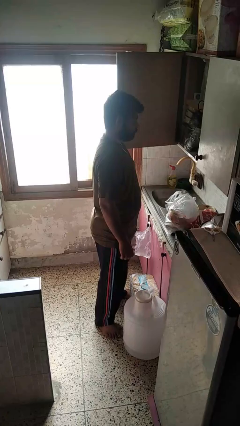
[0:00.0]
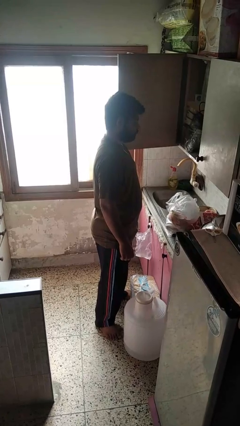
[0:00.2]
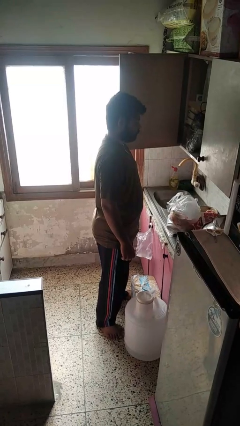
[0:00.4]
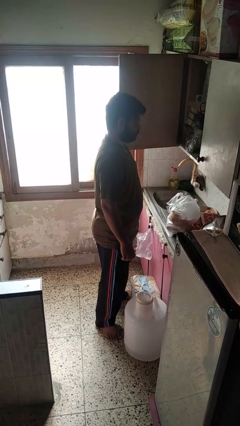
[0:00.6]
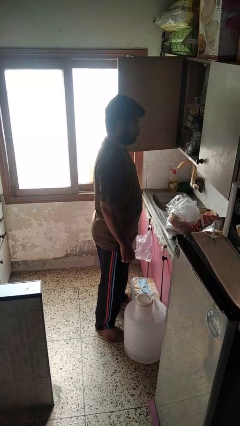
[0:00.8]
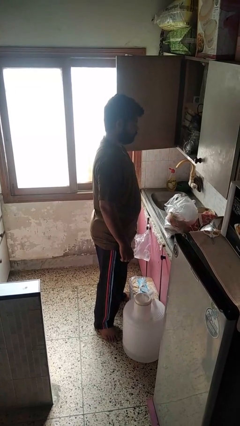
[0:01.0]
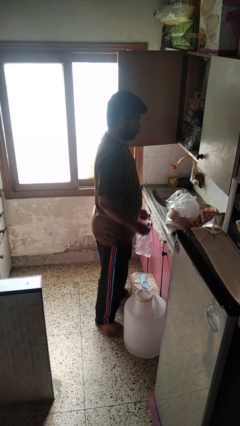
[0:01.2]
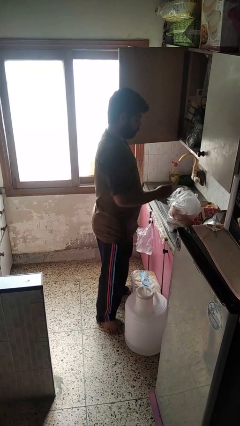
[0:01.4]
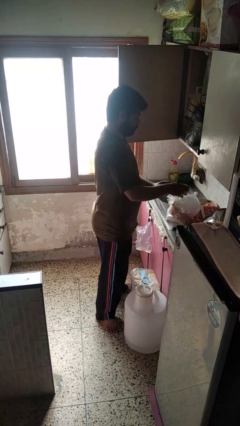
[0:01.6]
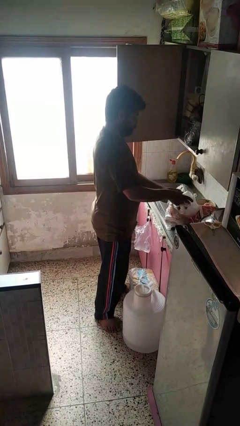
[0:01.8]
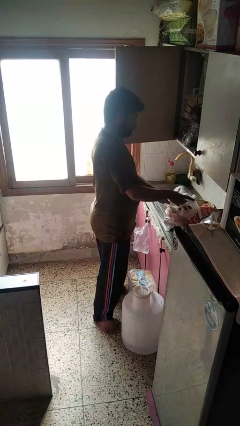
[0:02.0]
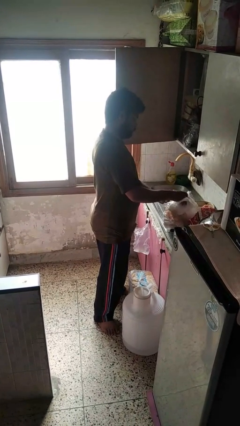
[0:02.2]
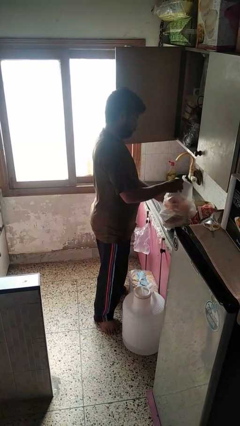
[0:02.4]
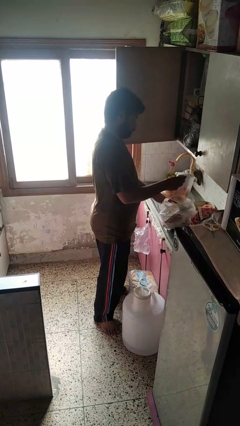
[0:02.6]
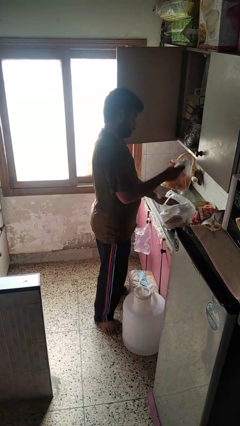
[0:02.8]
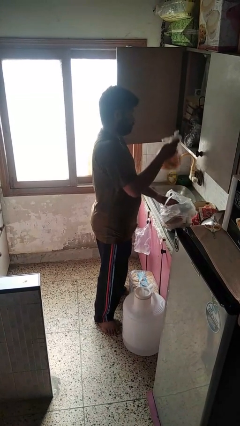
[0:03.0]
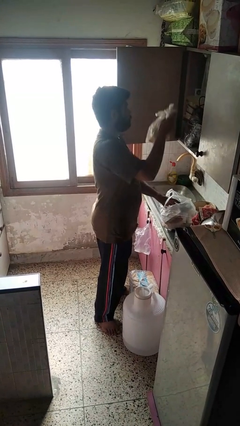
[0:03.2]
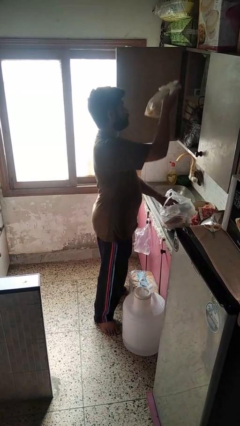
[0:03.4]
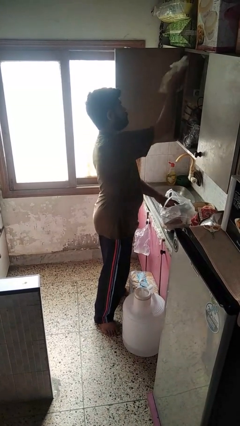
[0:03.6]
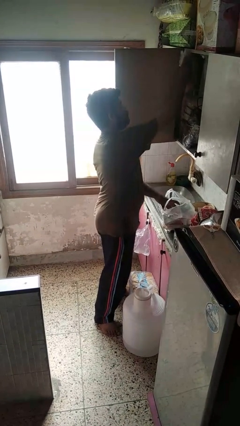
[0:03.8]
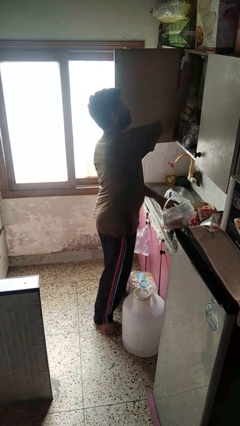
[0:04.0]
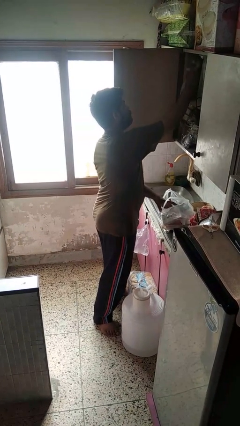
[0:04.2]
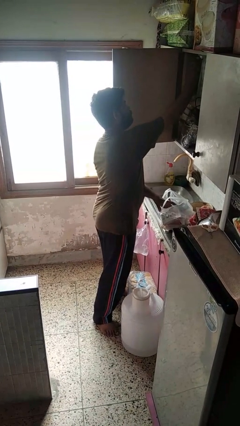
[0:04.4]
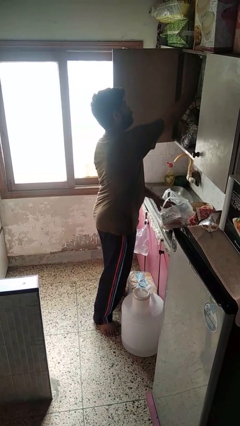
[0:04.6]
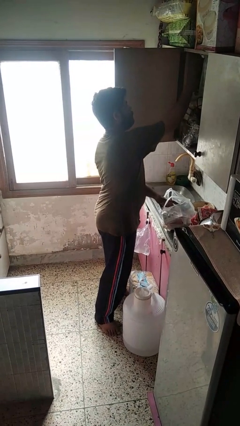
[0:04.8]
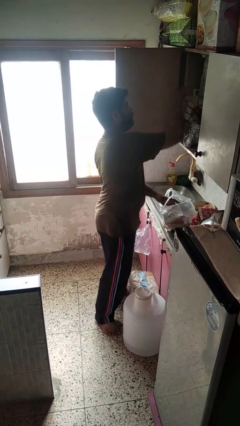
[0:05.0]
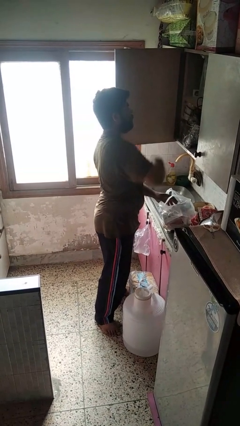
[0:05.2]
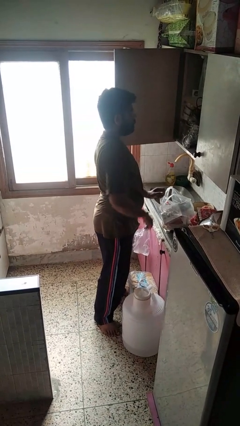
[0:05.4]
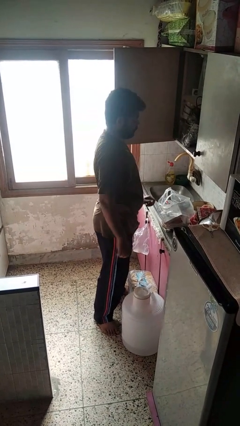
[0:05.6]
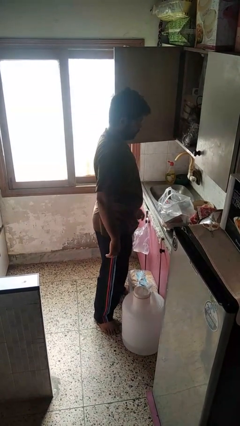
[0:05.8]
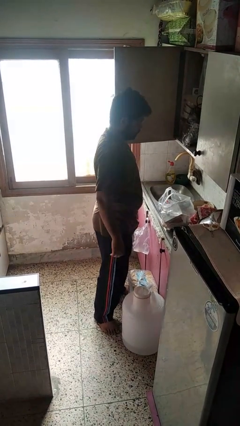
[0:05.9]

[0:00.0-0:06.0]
person loads groceries into cabinet

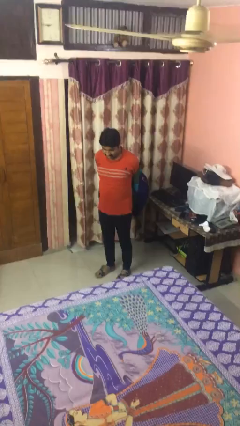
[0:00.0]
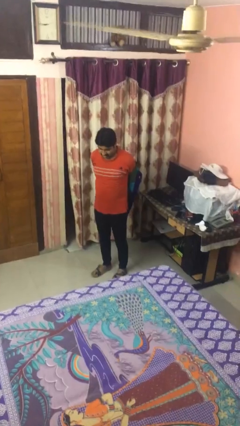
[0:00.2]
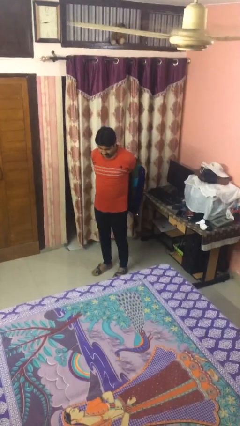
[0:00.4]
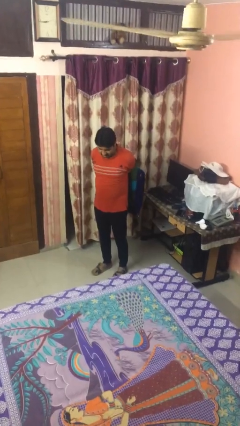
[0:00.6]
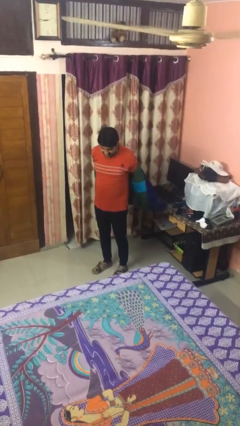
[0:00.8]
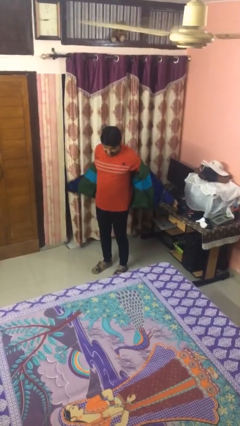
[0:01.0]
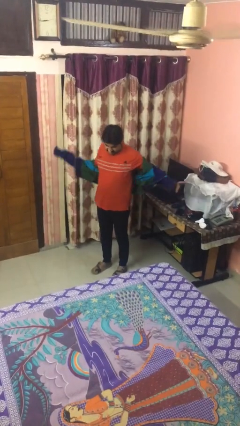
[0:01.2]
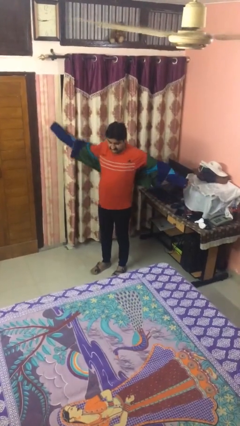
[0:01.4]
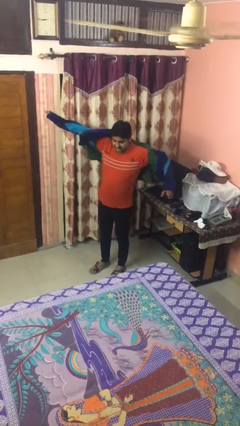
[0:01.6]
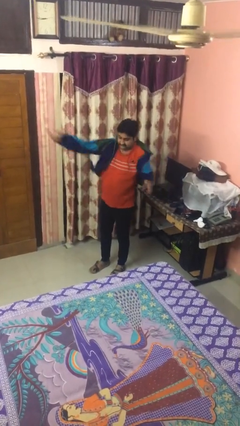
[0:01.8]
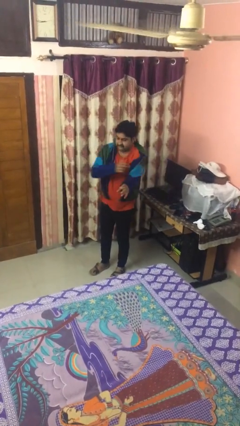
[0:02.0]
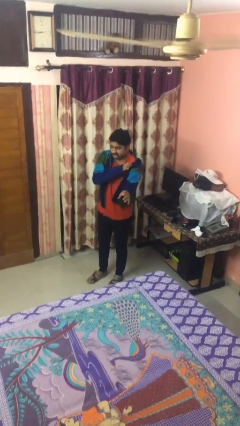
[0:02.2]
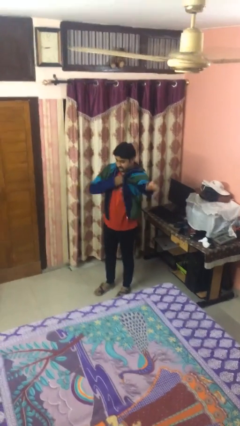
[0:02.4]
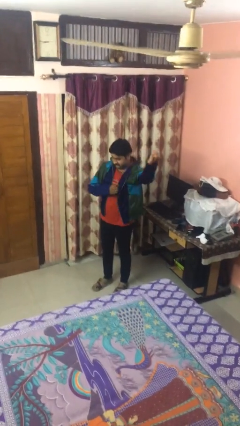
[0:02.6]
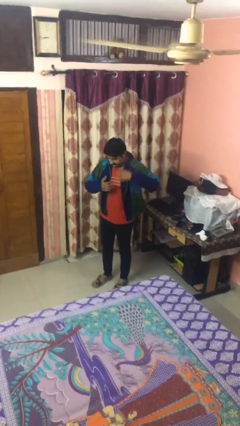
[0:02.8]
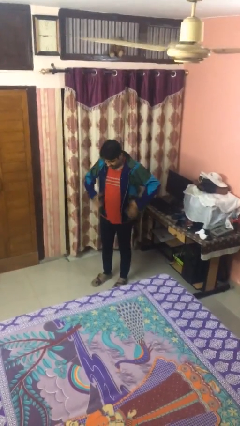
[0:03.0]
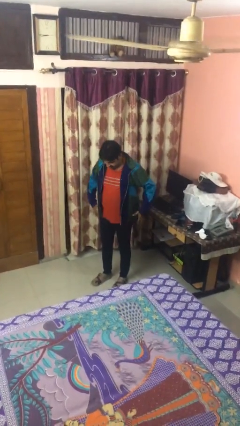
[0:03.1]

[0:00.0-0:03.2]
person puts on jacket

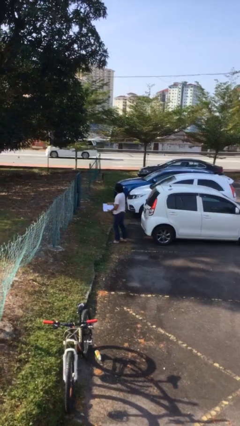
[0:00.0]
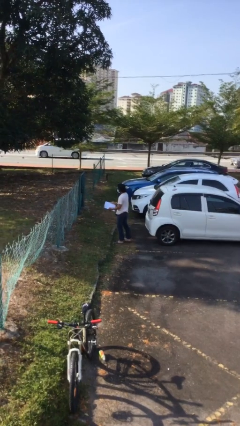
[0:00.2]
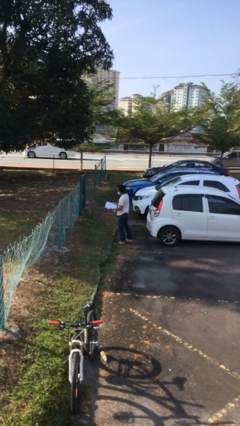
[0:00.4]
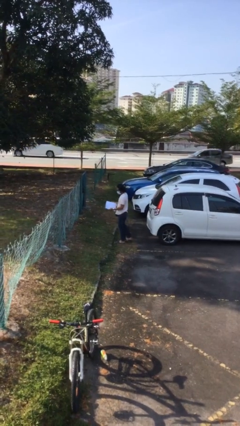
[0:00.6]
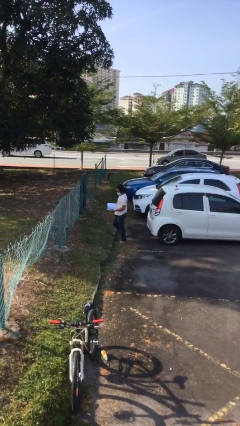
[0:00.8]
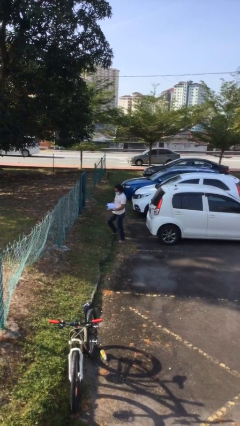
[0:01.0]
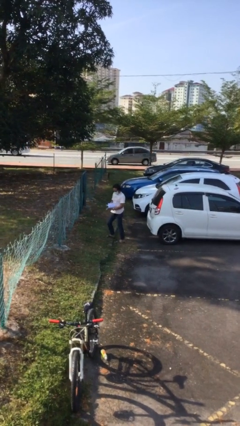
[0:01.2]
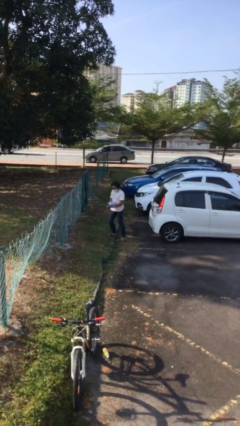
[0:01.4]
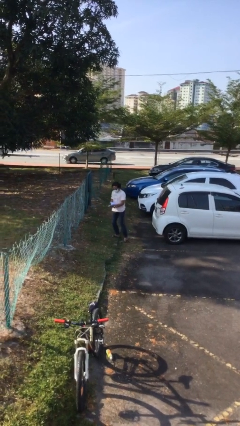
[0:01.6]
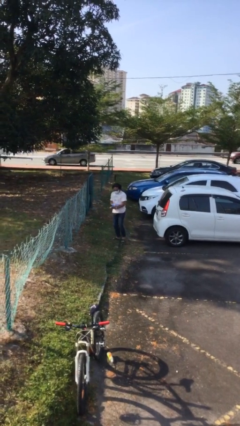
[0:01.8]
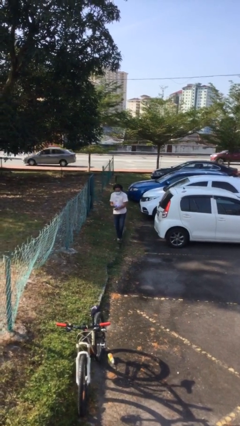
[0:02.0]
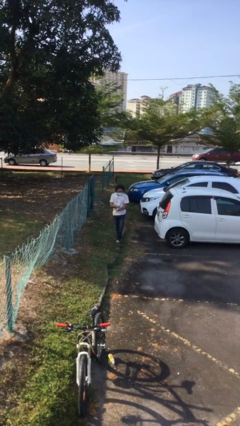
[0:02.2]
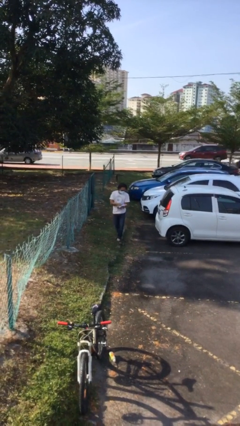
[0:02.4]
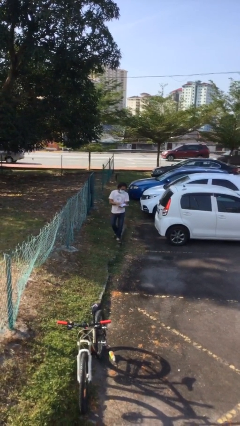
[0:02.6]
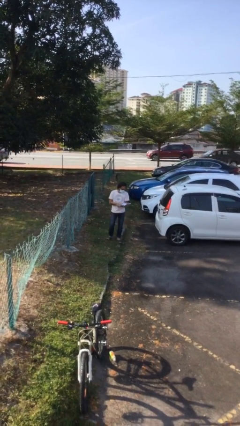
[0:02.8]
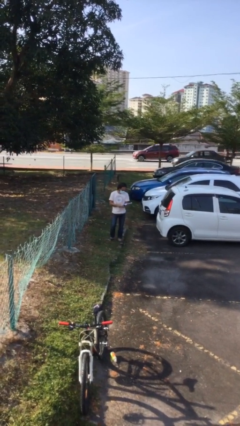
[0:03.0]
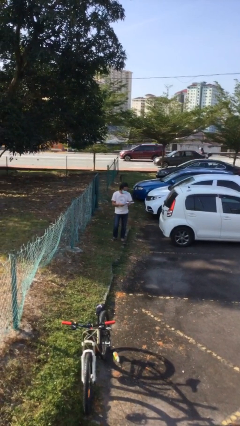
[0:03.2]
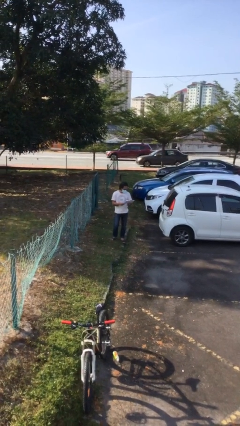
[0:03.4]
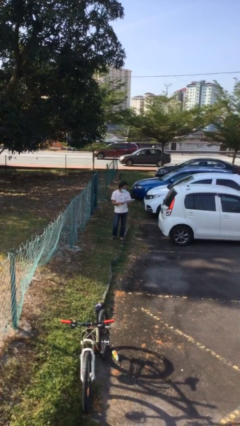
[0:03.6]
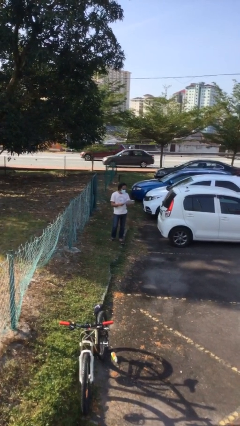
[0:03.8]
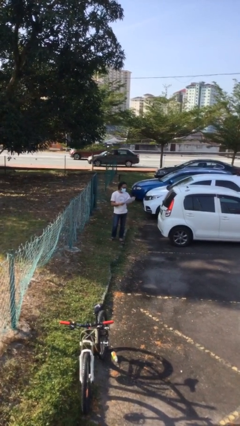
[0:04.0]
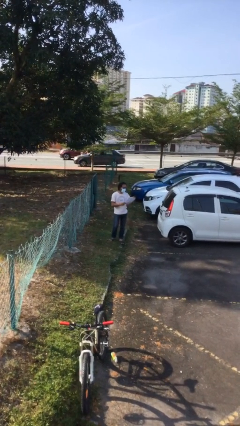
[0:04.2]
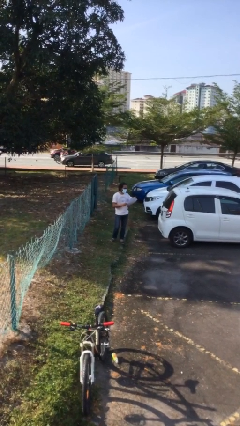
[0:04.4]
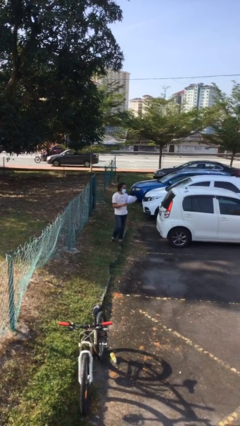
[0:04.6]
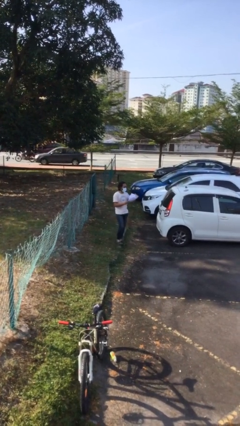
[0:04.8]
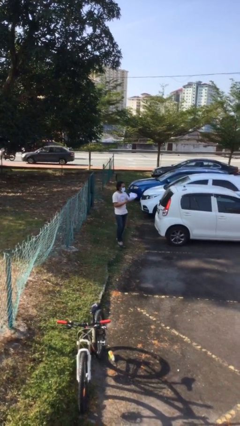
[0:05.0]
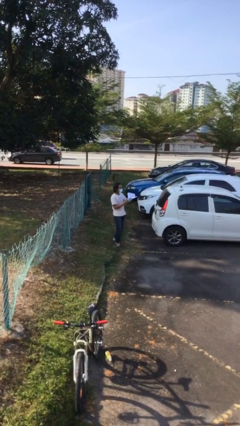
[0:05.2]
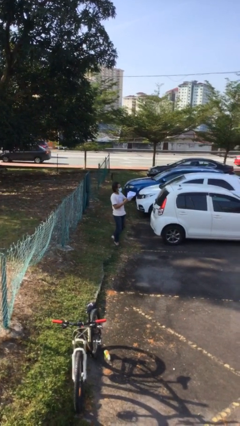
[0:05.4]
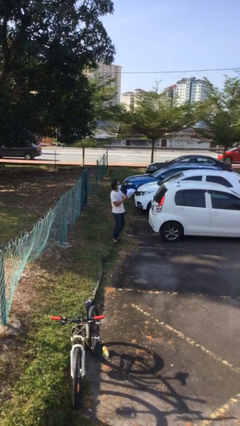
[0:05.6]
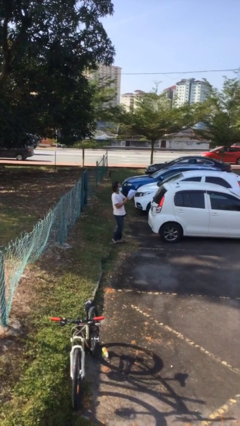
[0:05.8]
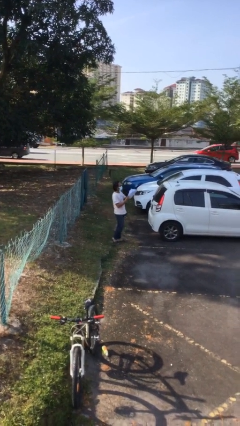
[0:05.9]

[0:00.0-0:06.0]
person reads document

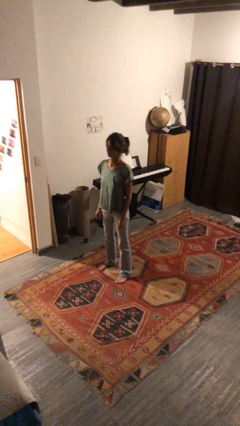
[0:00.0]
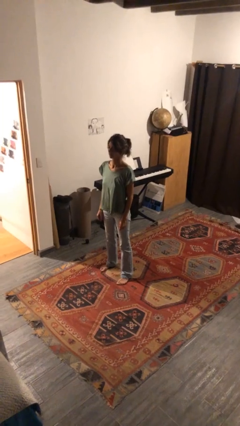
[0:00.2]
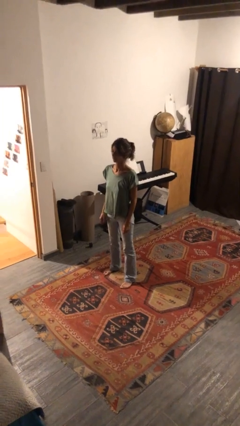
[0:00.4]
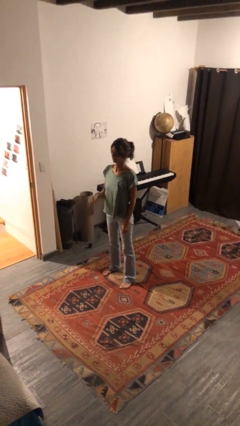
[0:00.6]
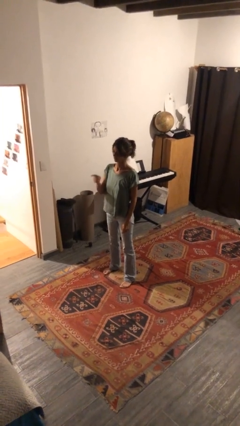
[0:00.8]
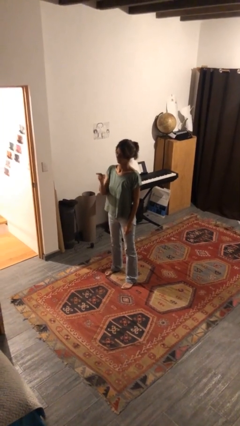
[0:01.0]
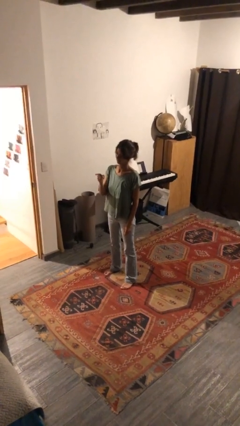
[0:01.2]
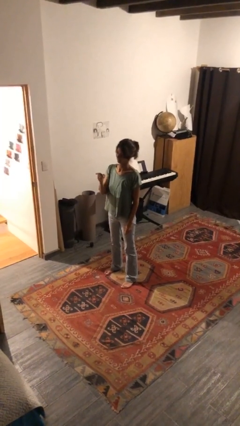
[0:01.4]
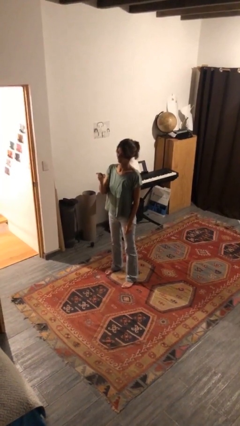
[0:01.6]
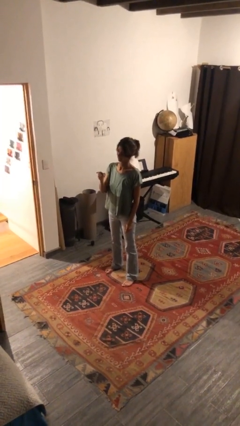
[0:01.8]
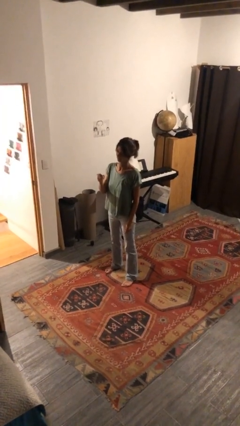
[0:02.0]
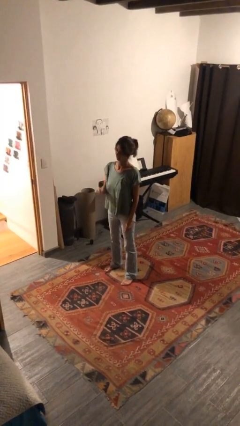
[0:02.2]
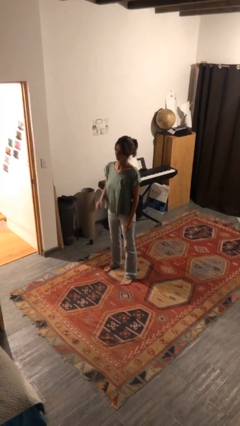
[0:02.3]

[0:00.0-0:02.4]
person points at person
